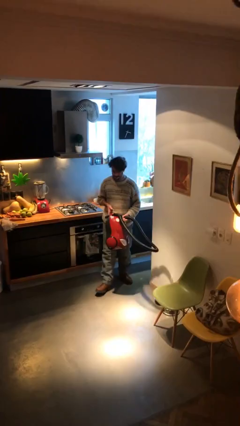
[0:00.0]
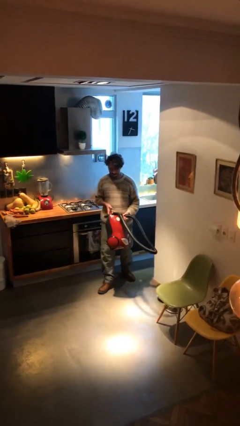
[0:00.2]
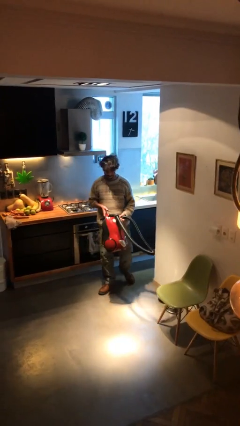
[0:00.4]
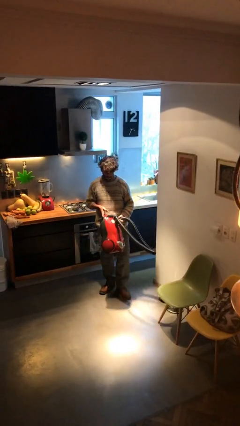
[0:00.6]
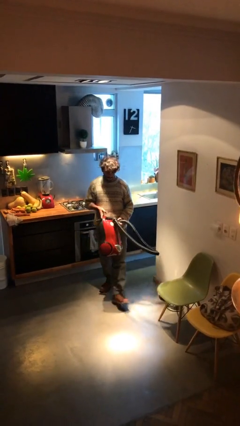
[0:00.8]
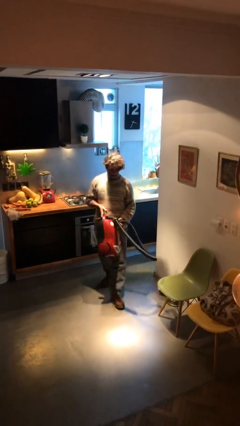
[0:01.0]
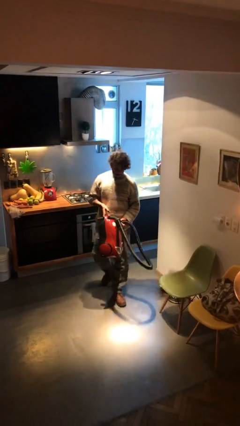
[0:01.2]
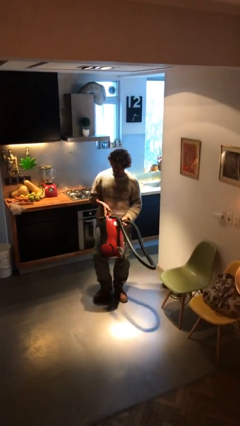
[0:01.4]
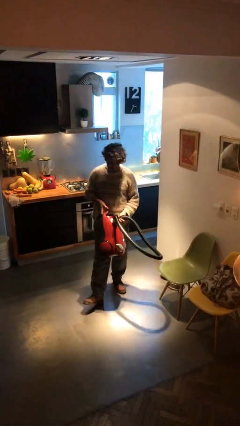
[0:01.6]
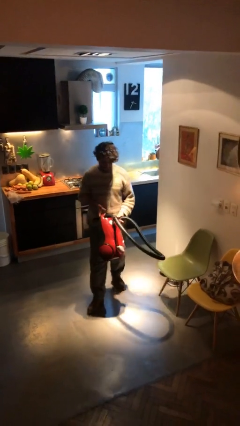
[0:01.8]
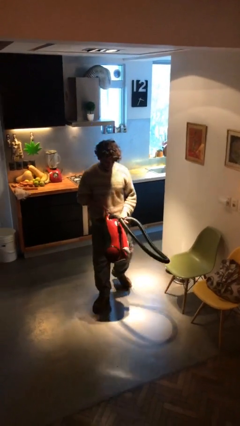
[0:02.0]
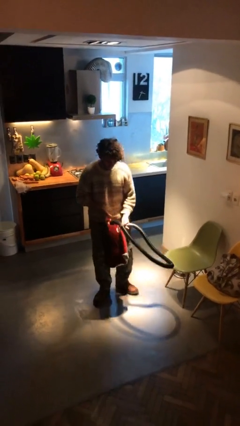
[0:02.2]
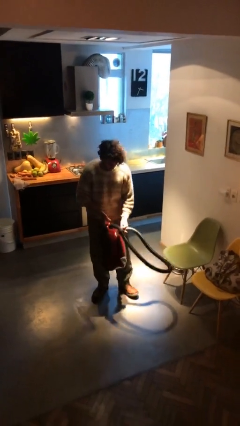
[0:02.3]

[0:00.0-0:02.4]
person carries heavy object

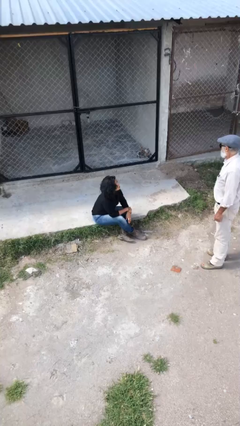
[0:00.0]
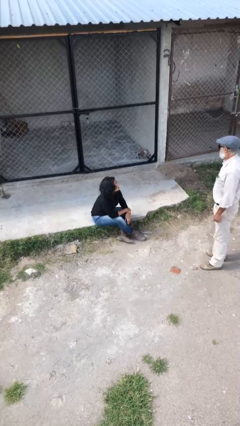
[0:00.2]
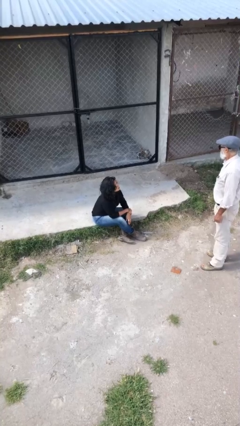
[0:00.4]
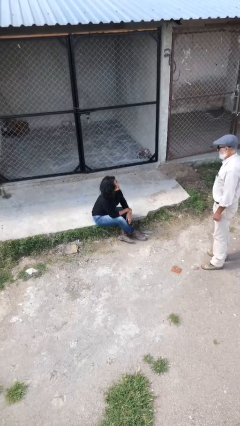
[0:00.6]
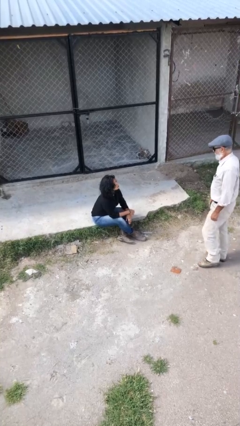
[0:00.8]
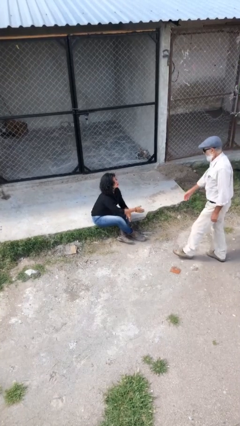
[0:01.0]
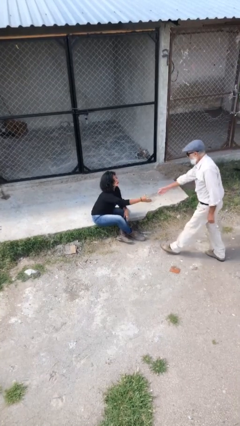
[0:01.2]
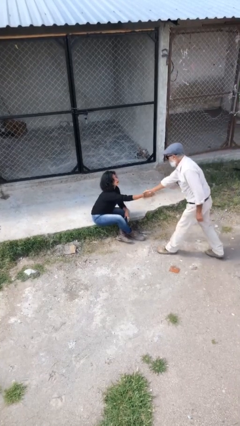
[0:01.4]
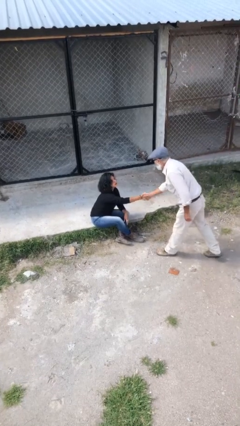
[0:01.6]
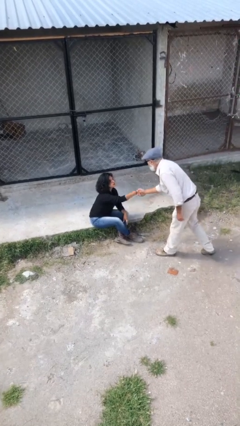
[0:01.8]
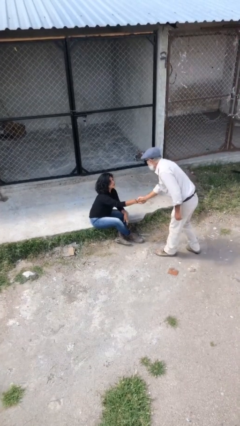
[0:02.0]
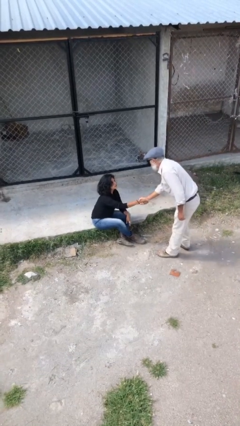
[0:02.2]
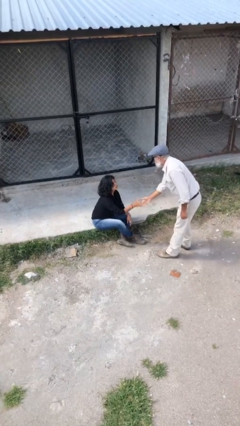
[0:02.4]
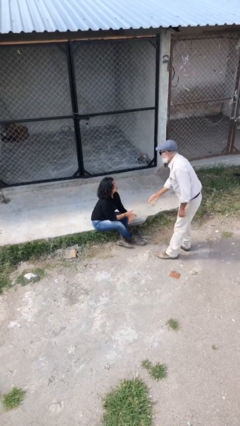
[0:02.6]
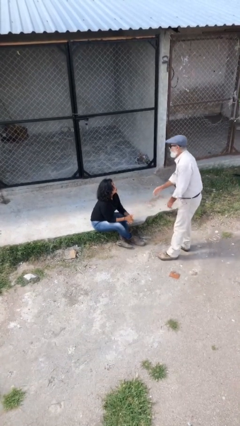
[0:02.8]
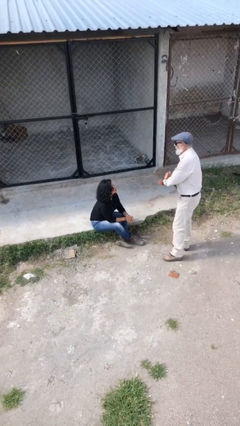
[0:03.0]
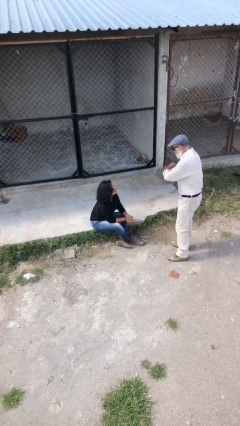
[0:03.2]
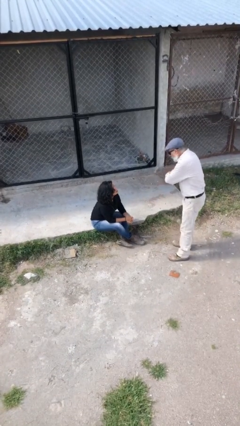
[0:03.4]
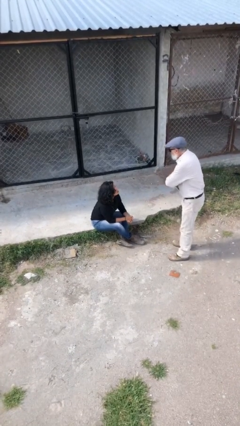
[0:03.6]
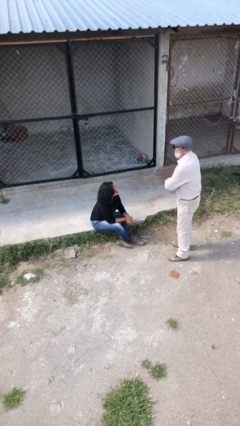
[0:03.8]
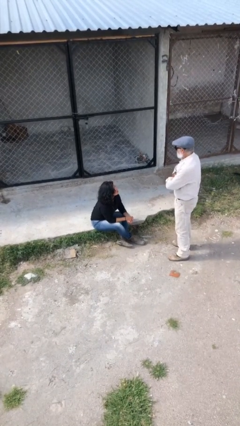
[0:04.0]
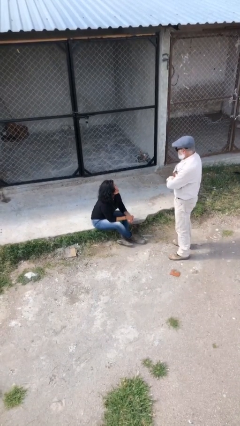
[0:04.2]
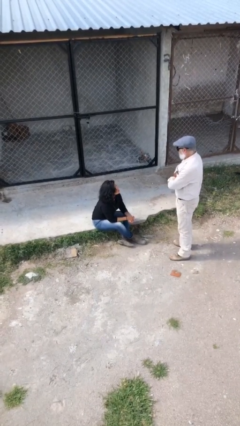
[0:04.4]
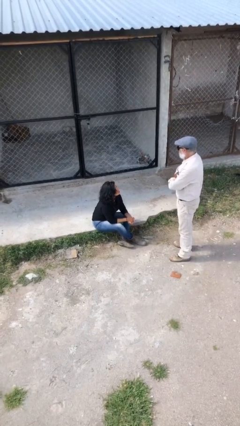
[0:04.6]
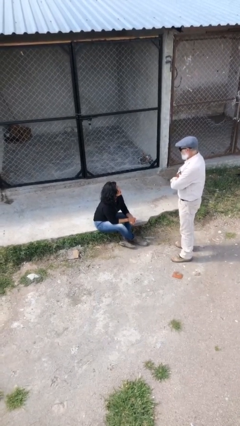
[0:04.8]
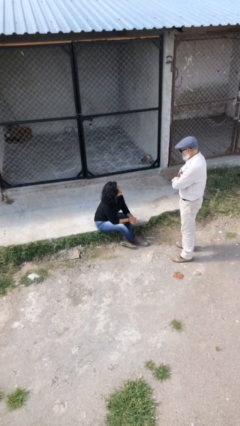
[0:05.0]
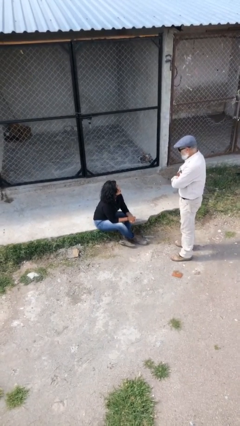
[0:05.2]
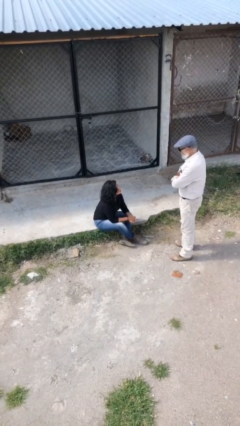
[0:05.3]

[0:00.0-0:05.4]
person shakes hand

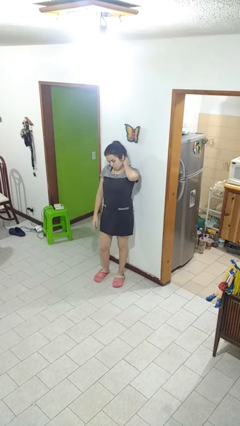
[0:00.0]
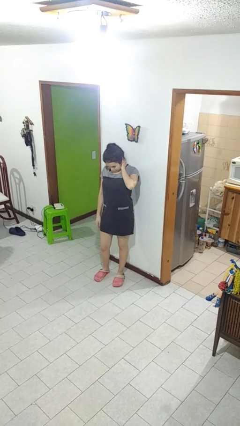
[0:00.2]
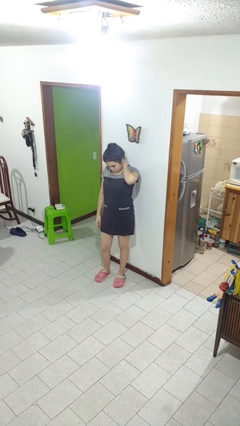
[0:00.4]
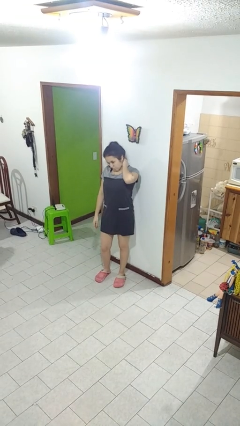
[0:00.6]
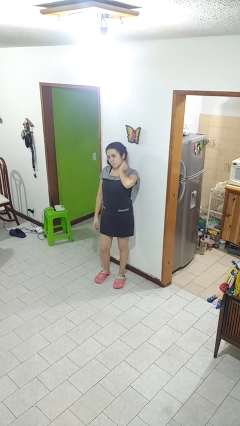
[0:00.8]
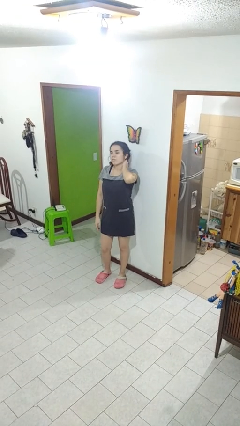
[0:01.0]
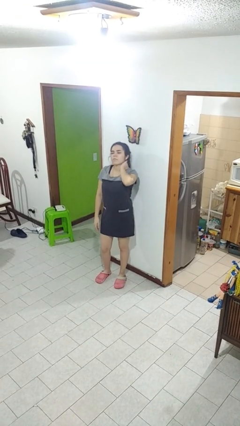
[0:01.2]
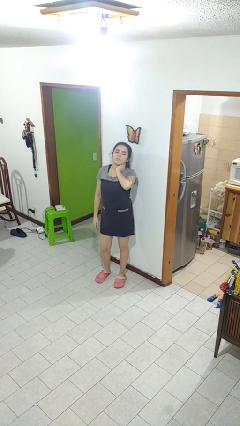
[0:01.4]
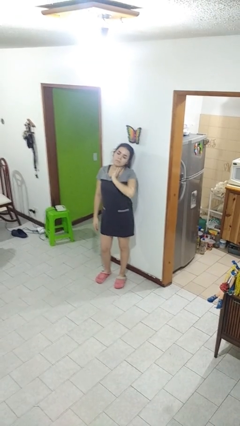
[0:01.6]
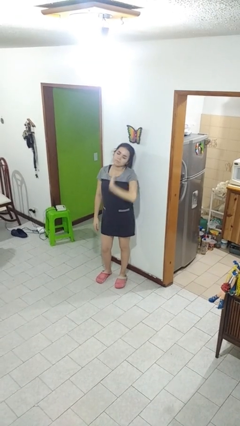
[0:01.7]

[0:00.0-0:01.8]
person rubs neck

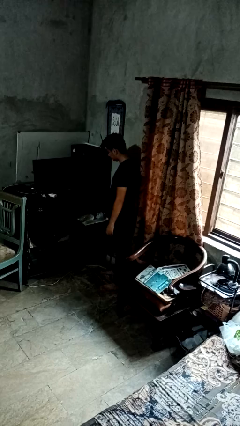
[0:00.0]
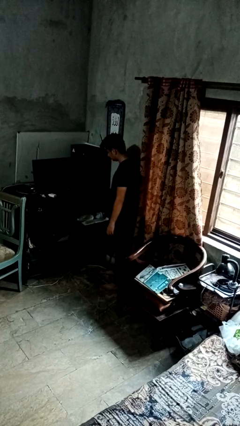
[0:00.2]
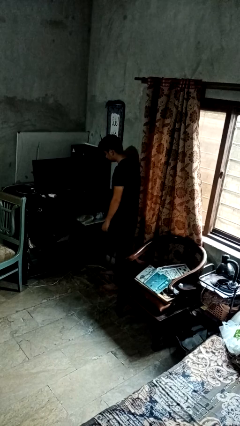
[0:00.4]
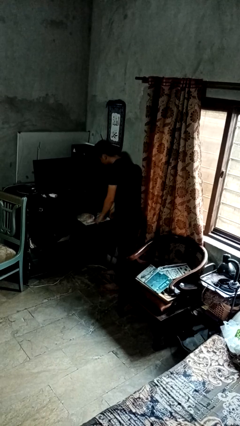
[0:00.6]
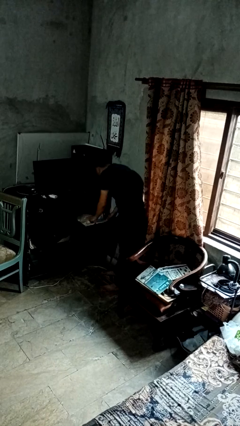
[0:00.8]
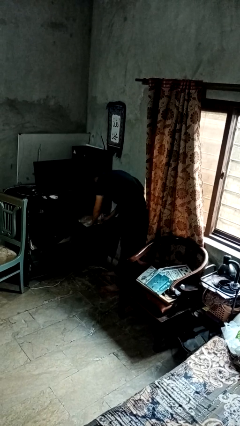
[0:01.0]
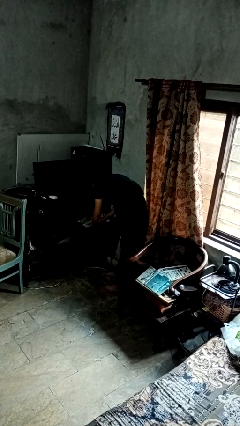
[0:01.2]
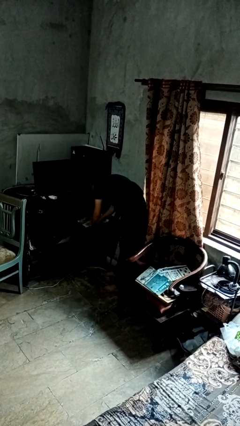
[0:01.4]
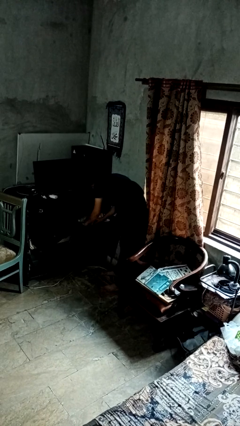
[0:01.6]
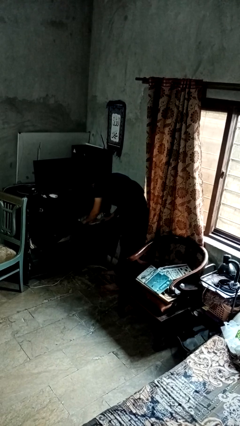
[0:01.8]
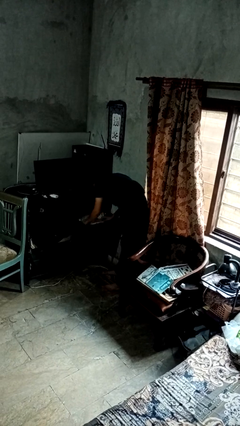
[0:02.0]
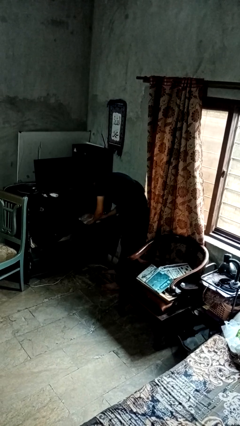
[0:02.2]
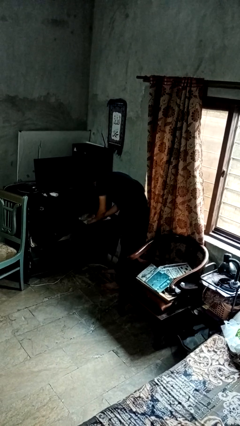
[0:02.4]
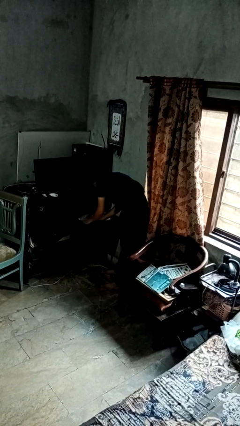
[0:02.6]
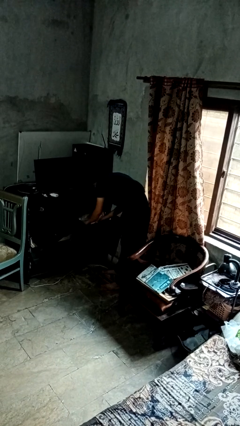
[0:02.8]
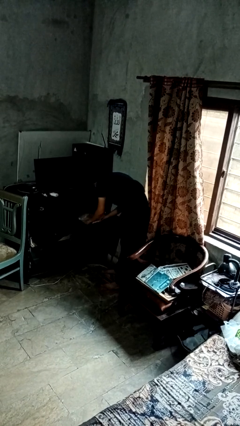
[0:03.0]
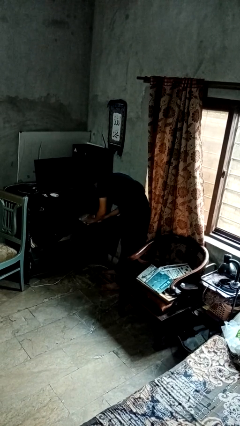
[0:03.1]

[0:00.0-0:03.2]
person searches in cabinet

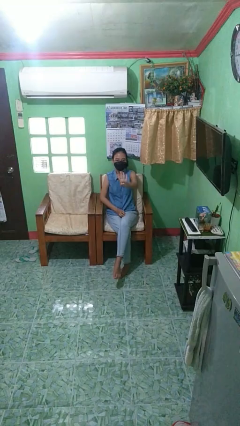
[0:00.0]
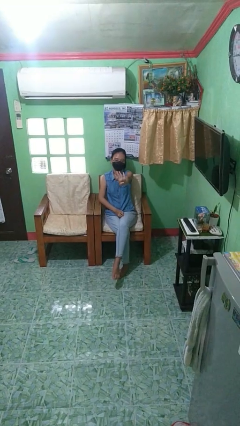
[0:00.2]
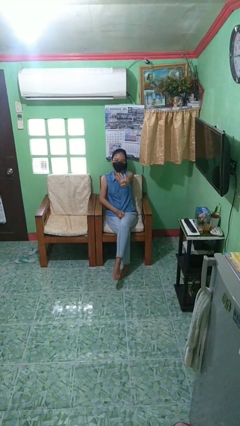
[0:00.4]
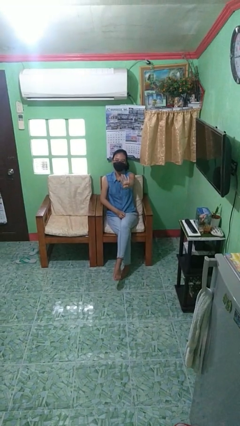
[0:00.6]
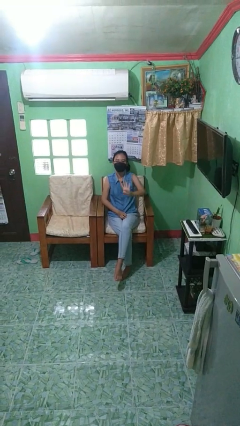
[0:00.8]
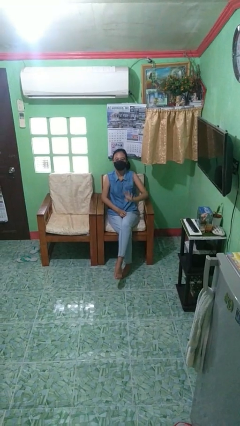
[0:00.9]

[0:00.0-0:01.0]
person gestures number four

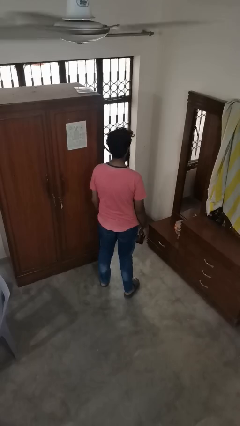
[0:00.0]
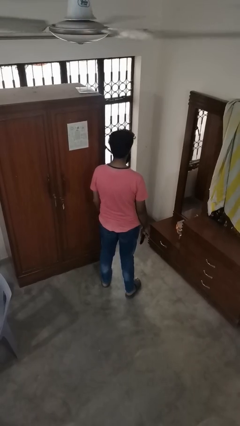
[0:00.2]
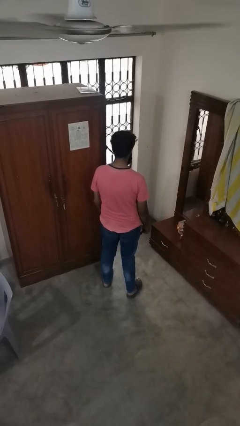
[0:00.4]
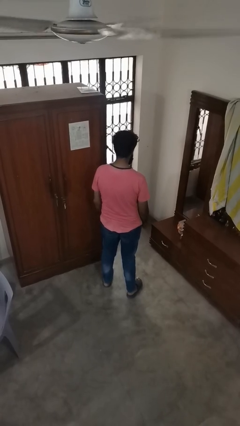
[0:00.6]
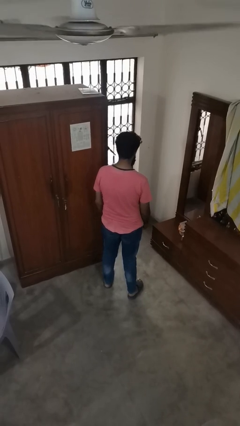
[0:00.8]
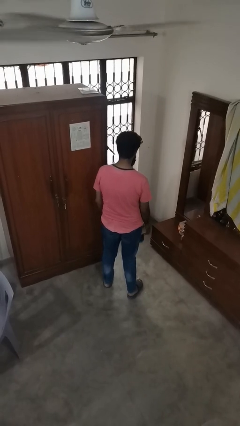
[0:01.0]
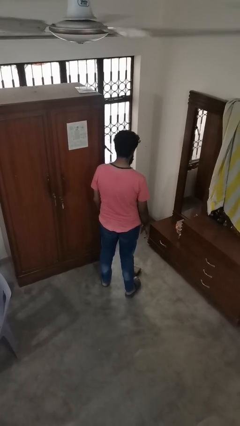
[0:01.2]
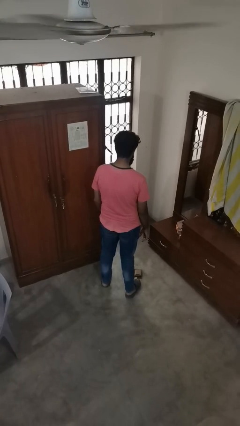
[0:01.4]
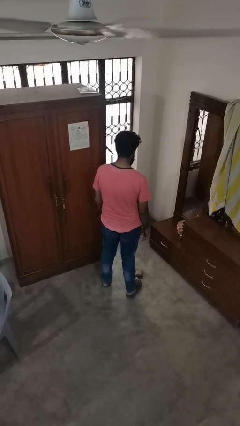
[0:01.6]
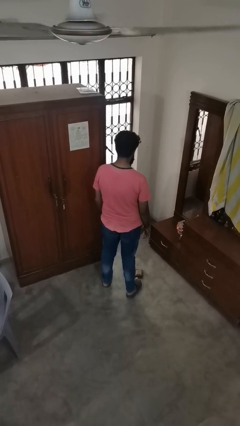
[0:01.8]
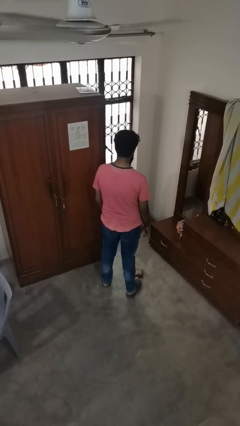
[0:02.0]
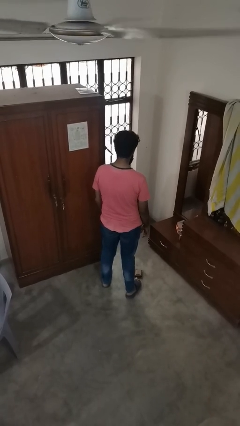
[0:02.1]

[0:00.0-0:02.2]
person throws object to ground

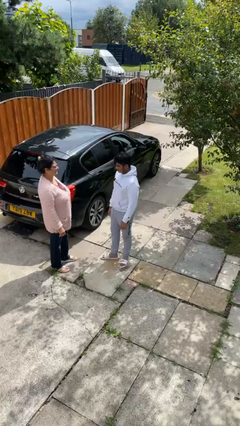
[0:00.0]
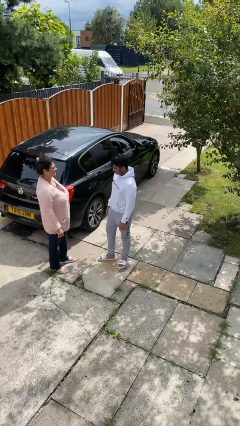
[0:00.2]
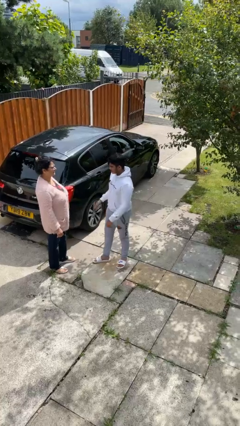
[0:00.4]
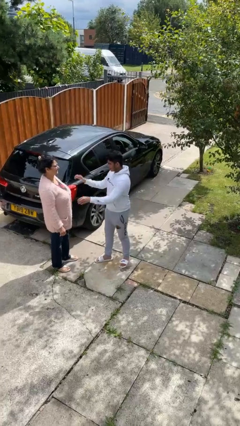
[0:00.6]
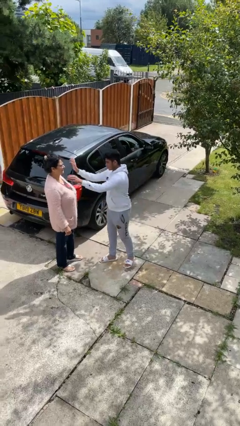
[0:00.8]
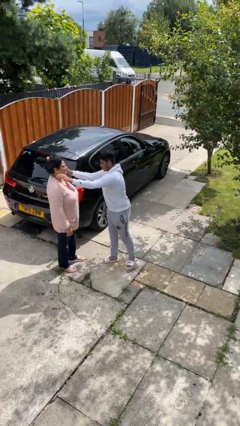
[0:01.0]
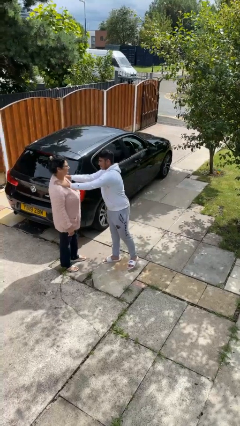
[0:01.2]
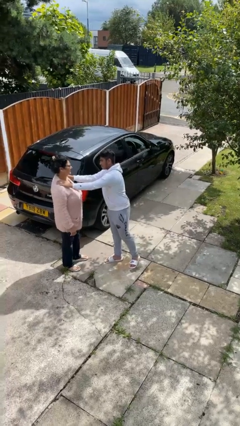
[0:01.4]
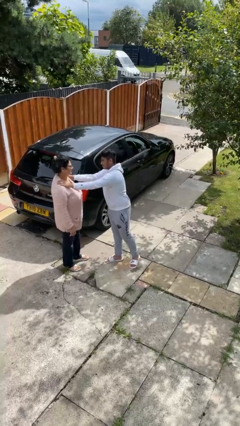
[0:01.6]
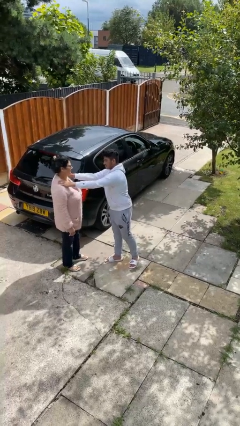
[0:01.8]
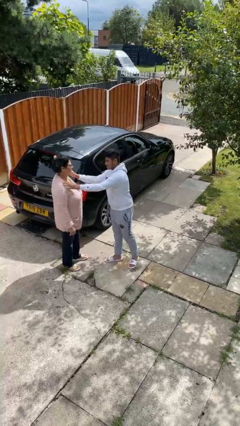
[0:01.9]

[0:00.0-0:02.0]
person pounds shoulders of person
